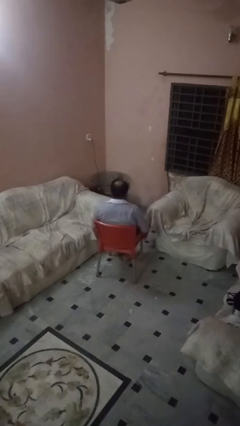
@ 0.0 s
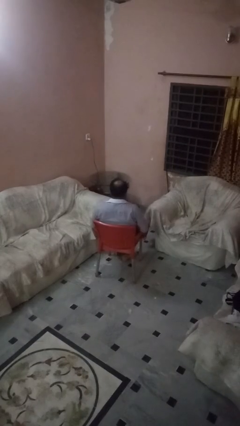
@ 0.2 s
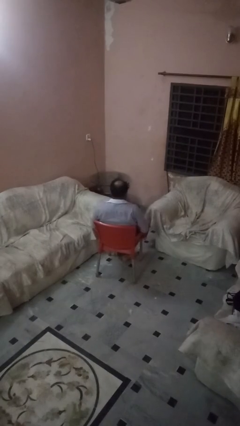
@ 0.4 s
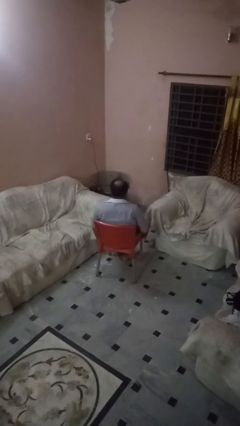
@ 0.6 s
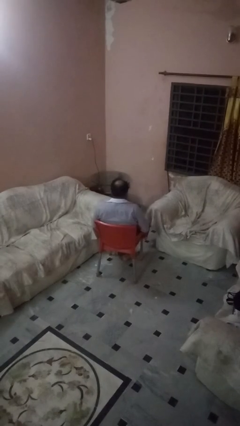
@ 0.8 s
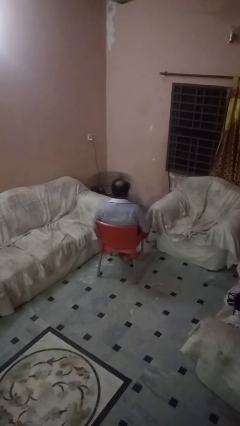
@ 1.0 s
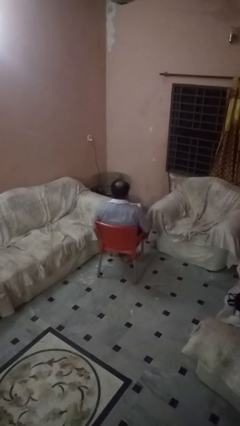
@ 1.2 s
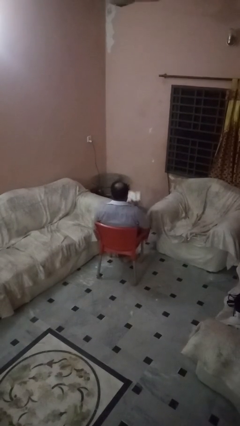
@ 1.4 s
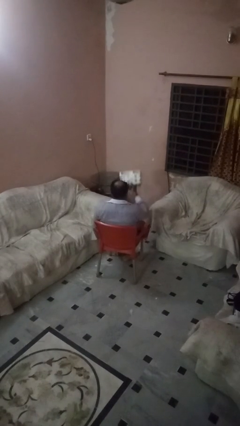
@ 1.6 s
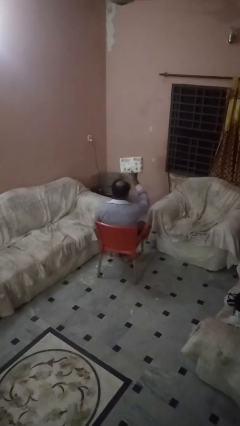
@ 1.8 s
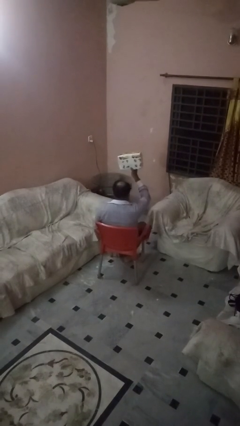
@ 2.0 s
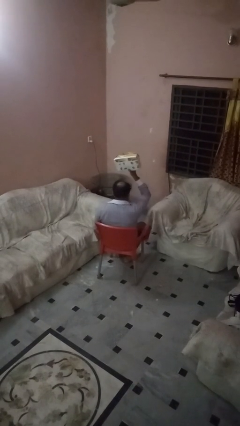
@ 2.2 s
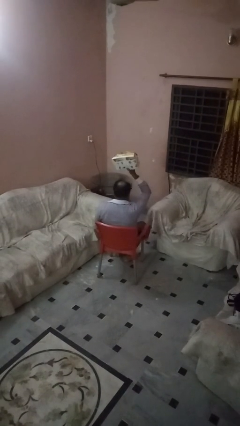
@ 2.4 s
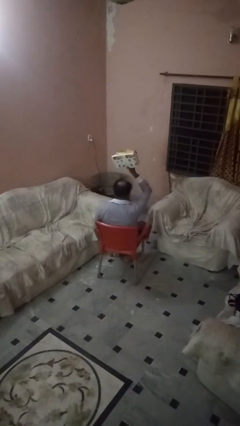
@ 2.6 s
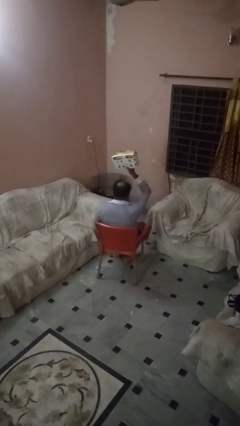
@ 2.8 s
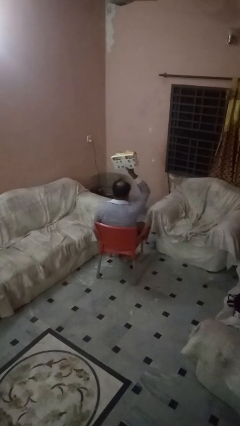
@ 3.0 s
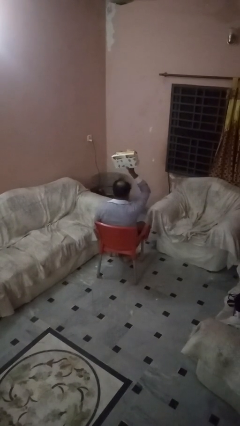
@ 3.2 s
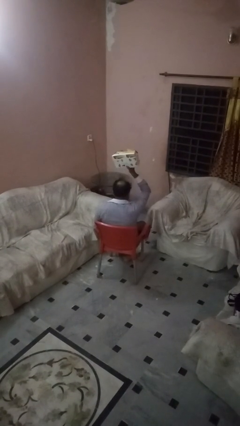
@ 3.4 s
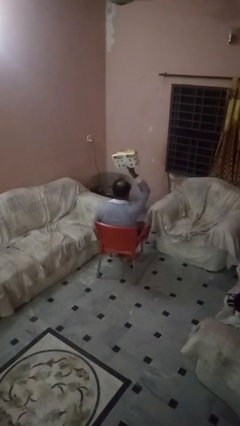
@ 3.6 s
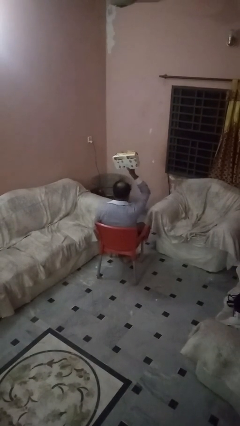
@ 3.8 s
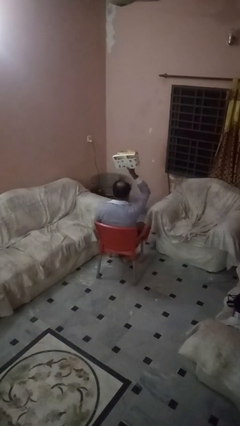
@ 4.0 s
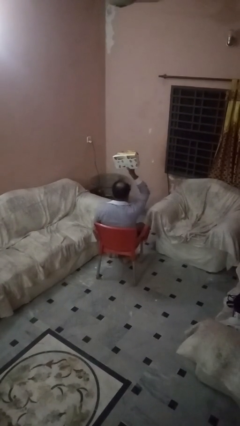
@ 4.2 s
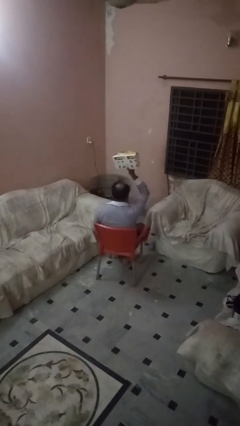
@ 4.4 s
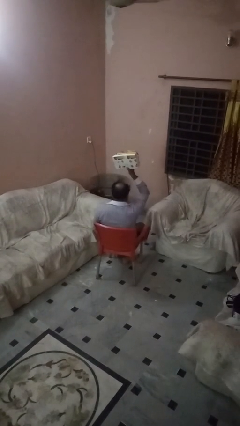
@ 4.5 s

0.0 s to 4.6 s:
person holds object above head

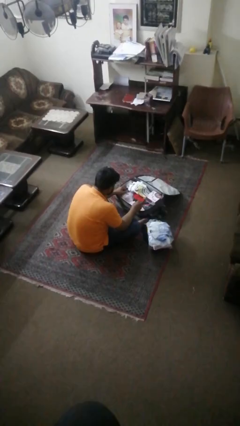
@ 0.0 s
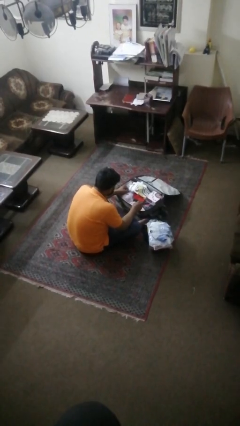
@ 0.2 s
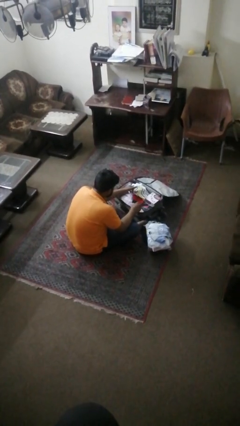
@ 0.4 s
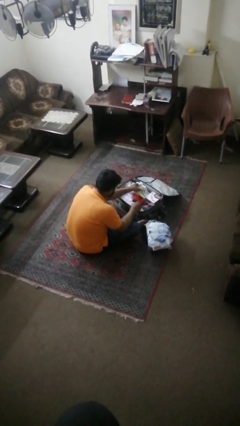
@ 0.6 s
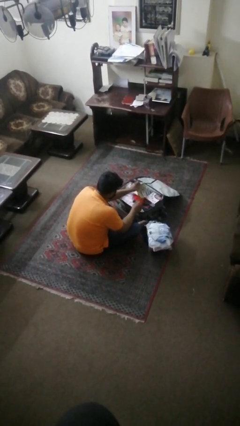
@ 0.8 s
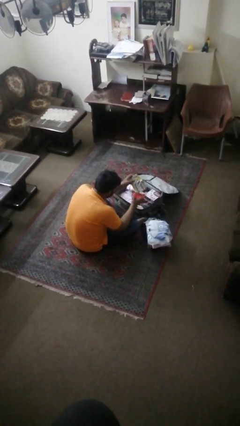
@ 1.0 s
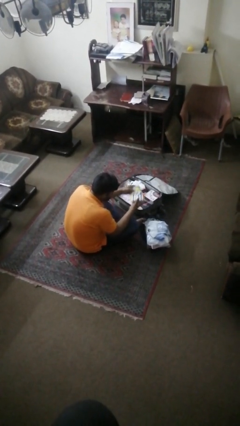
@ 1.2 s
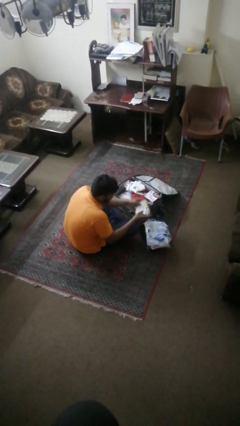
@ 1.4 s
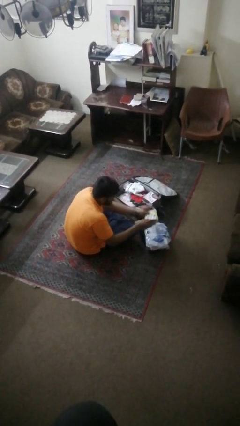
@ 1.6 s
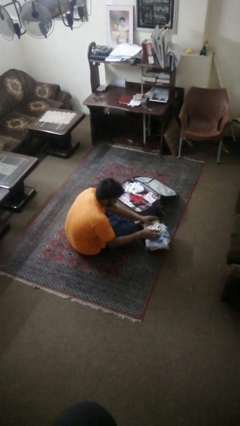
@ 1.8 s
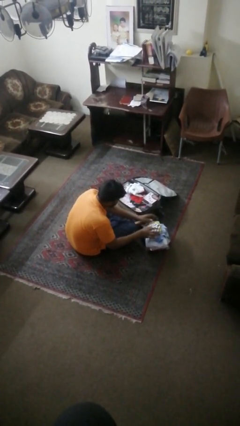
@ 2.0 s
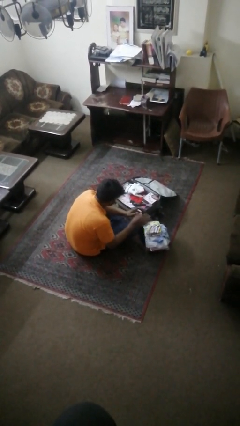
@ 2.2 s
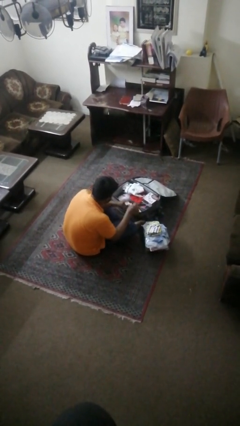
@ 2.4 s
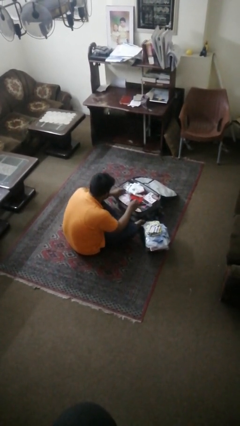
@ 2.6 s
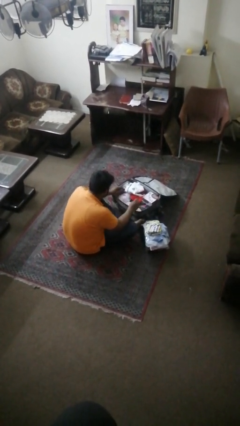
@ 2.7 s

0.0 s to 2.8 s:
person unloads clothes from suitcase

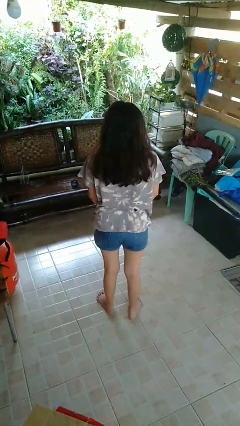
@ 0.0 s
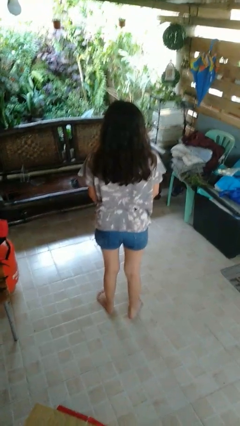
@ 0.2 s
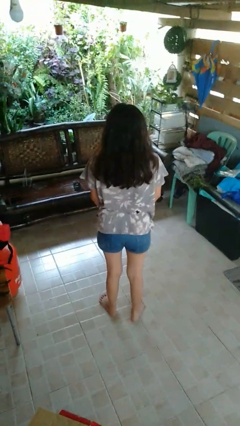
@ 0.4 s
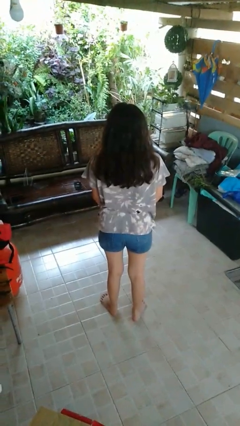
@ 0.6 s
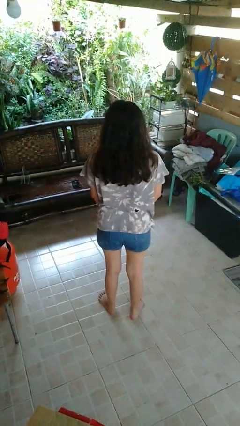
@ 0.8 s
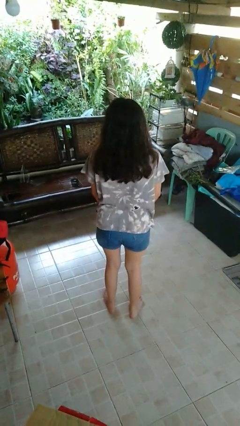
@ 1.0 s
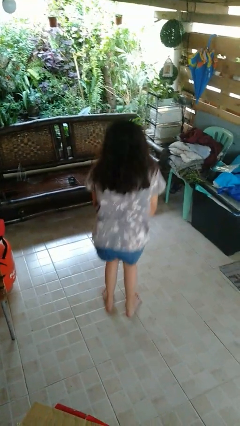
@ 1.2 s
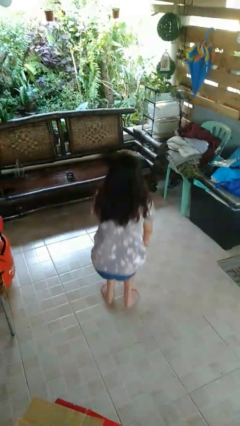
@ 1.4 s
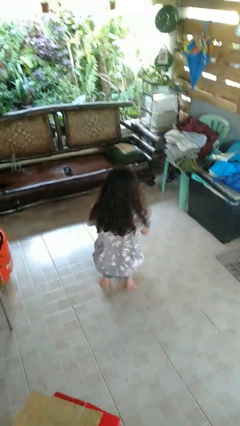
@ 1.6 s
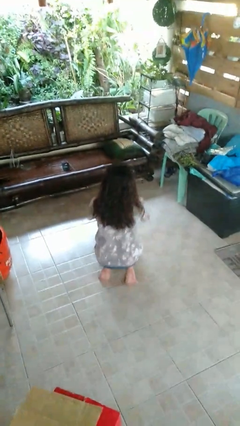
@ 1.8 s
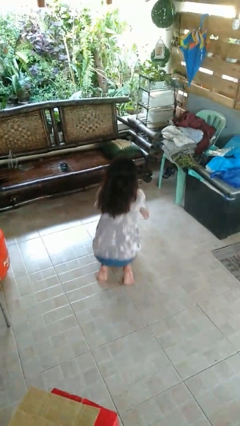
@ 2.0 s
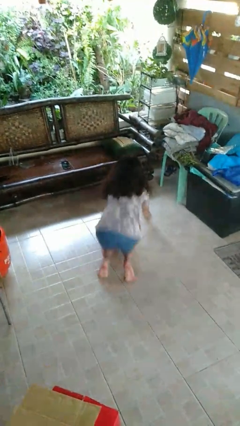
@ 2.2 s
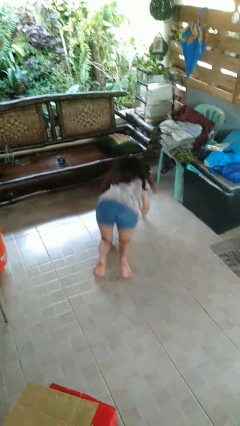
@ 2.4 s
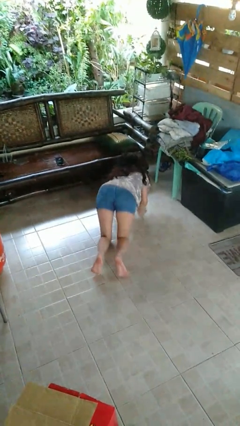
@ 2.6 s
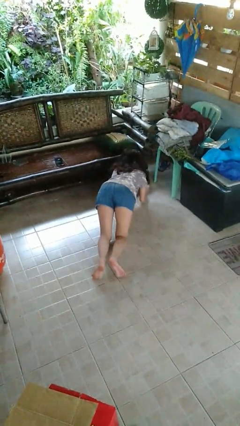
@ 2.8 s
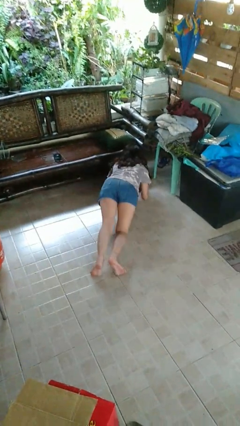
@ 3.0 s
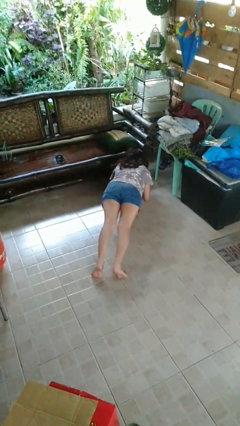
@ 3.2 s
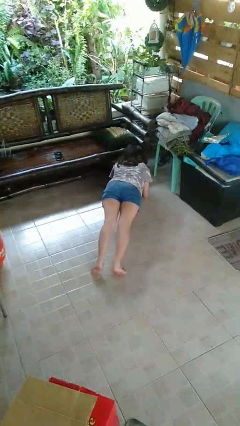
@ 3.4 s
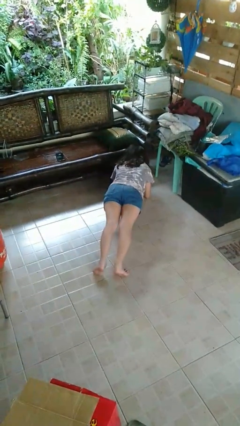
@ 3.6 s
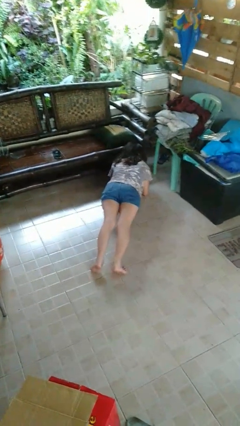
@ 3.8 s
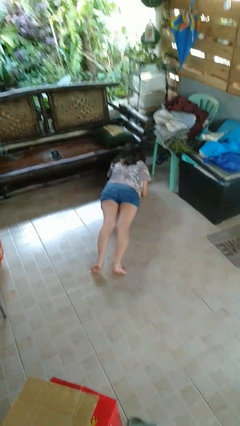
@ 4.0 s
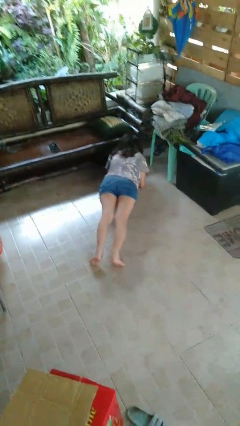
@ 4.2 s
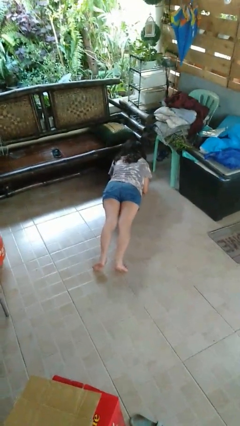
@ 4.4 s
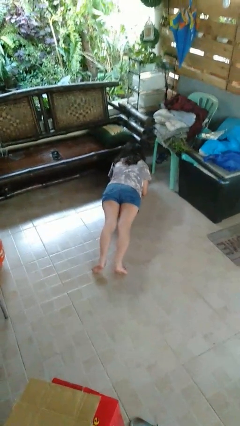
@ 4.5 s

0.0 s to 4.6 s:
person exercises with plank

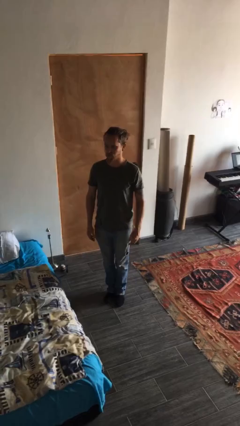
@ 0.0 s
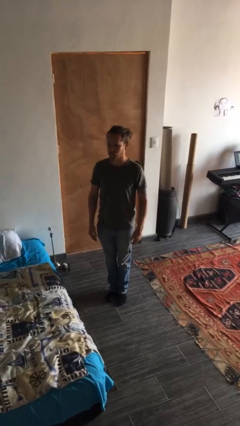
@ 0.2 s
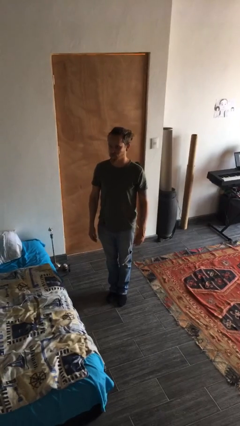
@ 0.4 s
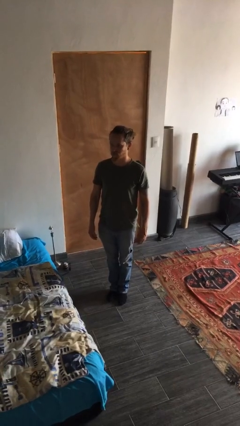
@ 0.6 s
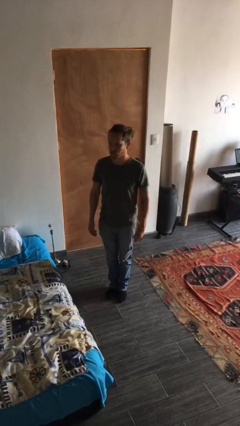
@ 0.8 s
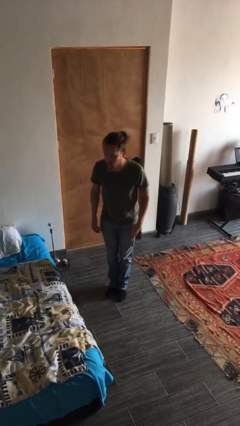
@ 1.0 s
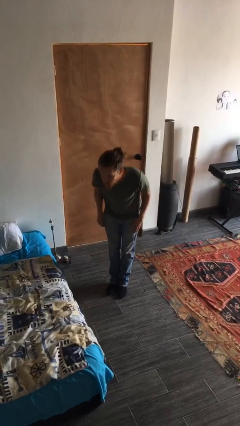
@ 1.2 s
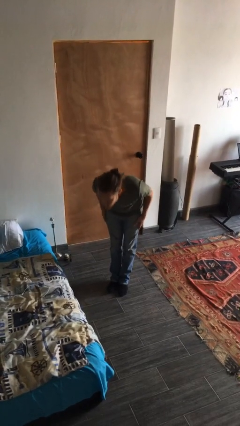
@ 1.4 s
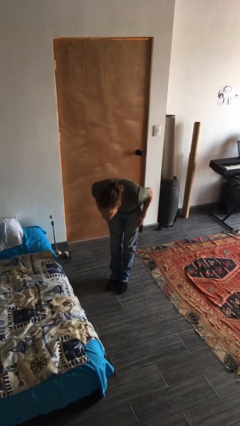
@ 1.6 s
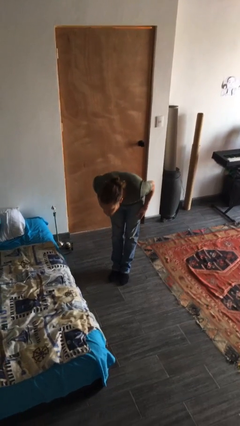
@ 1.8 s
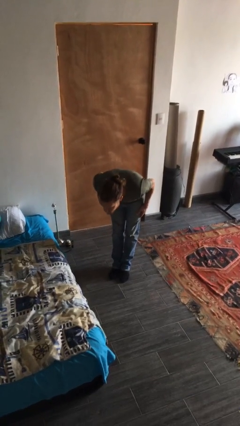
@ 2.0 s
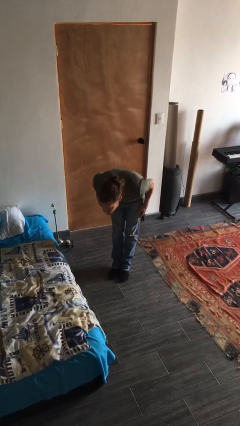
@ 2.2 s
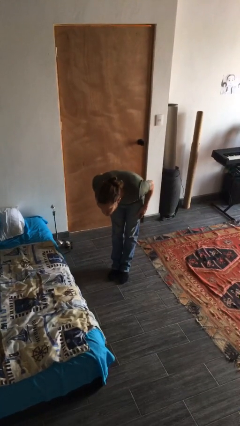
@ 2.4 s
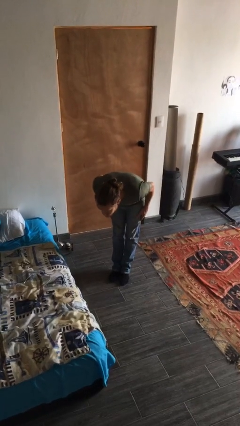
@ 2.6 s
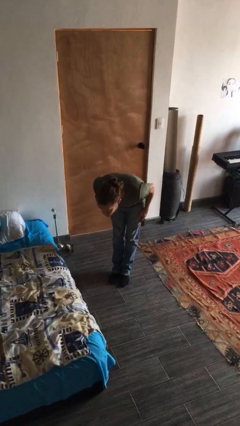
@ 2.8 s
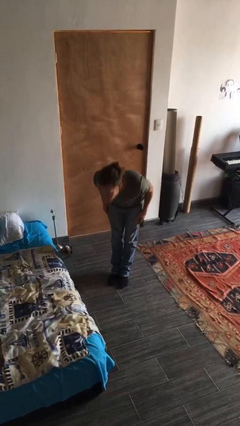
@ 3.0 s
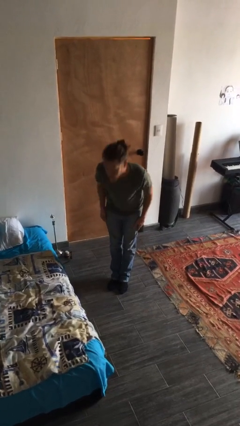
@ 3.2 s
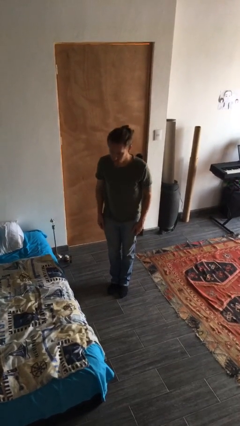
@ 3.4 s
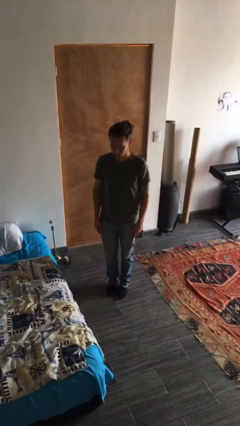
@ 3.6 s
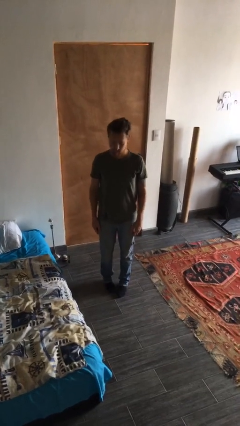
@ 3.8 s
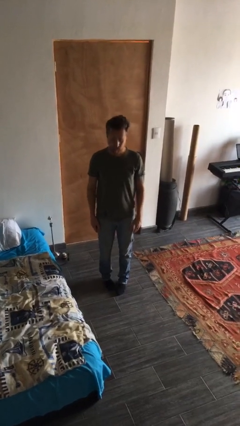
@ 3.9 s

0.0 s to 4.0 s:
person bows

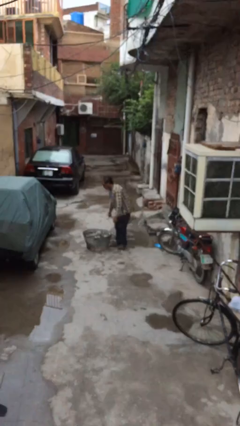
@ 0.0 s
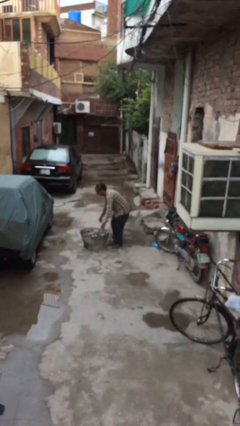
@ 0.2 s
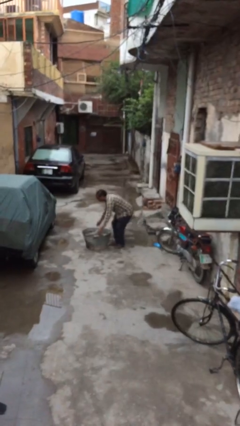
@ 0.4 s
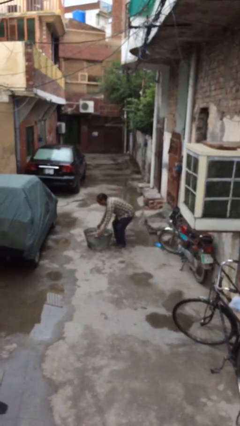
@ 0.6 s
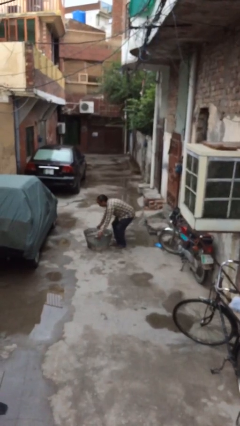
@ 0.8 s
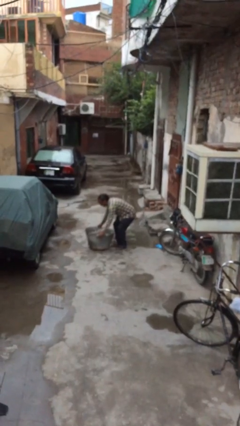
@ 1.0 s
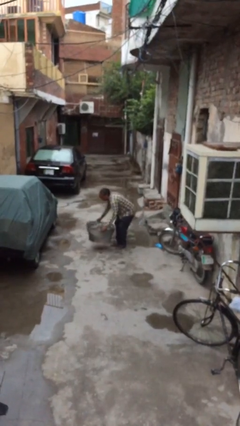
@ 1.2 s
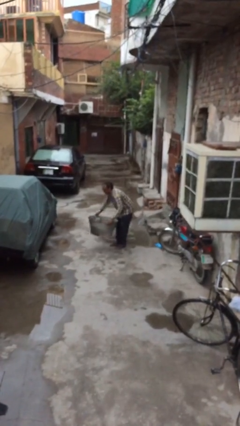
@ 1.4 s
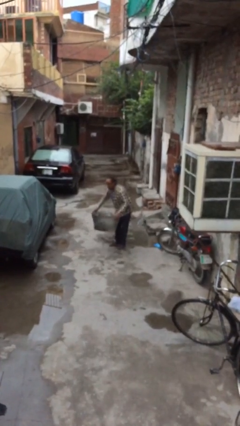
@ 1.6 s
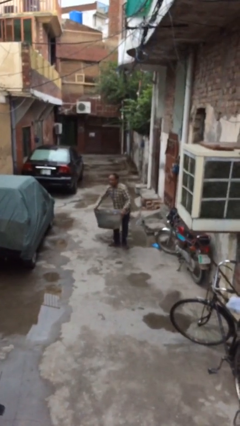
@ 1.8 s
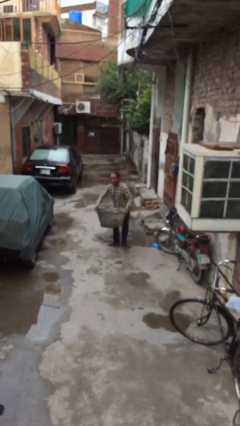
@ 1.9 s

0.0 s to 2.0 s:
person picks up object from floor
